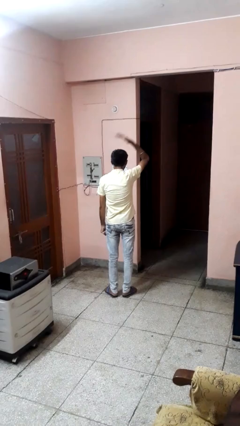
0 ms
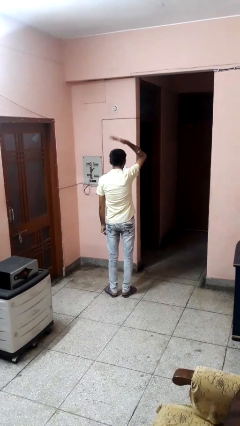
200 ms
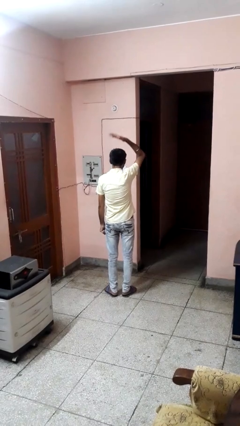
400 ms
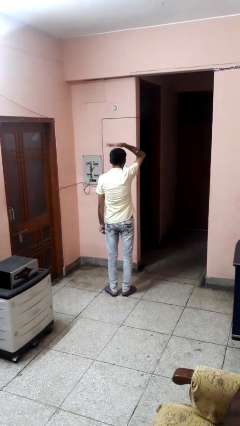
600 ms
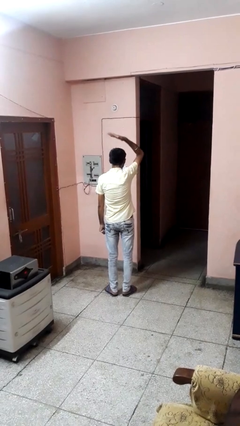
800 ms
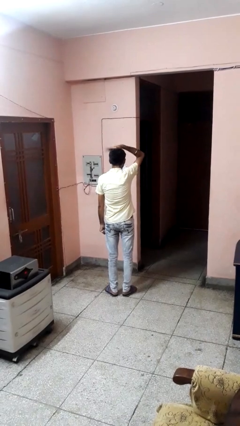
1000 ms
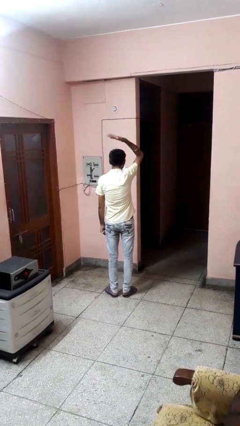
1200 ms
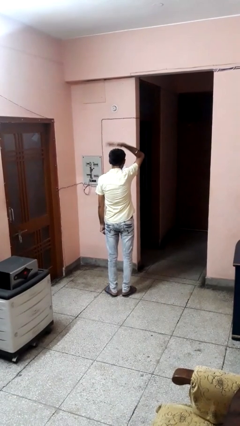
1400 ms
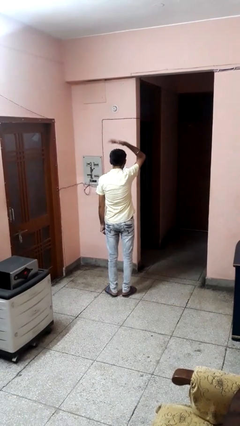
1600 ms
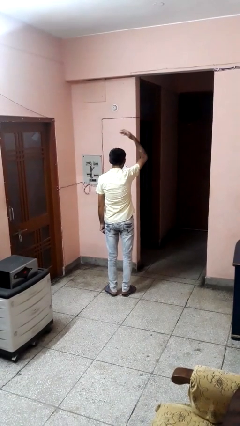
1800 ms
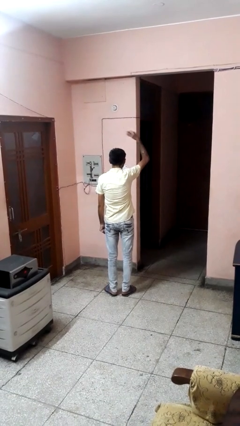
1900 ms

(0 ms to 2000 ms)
person pats head

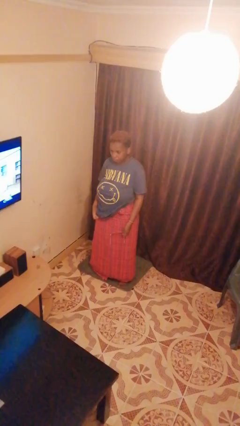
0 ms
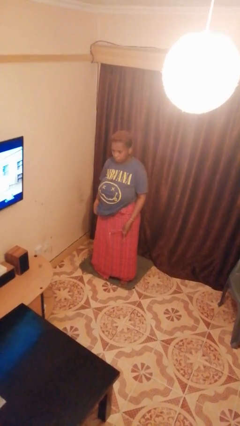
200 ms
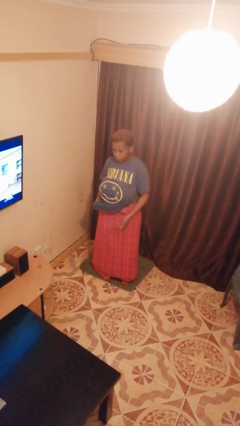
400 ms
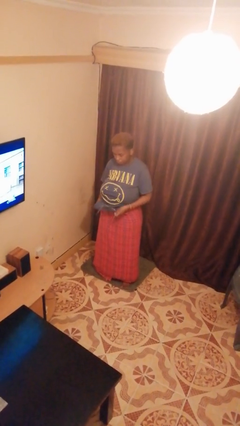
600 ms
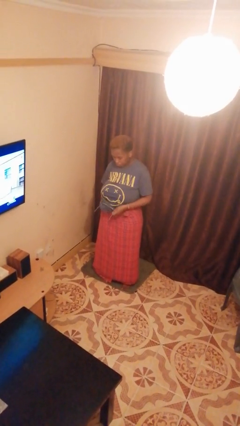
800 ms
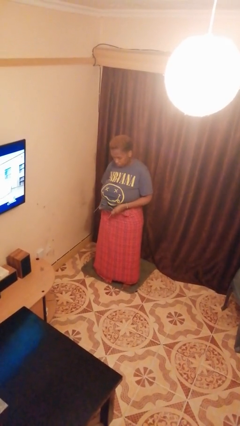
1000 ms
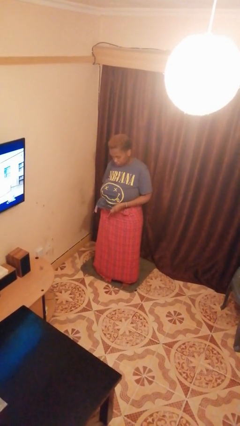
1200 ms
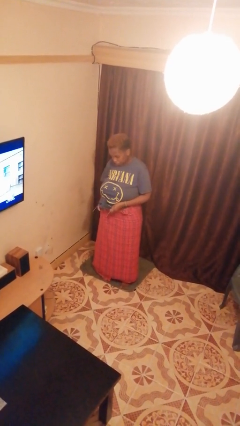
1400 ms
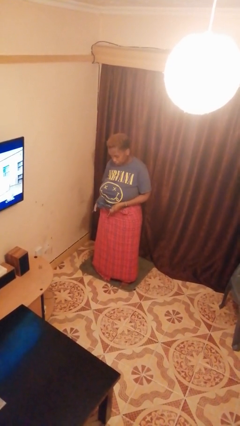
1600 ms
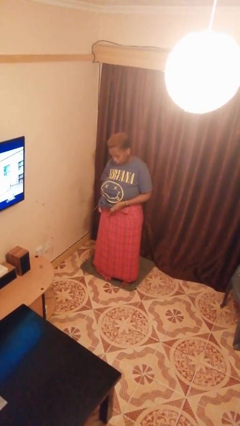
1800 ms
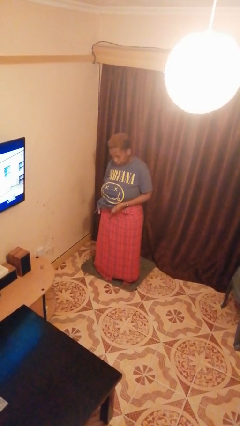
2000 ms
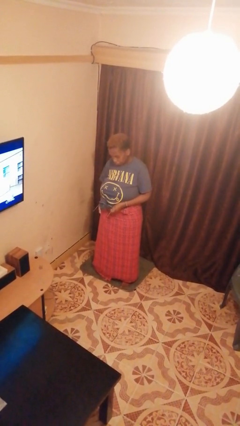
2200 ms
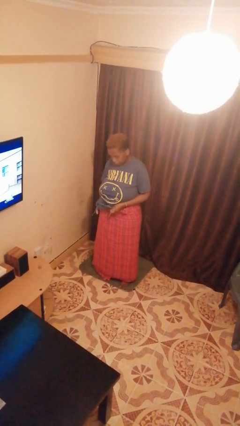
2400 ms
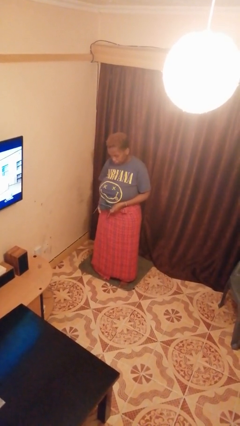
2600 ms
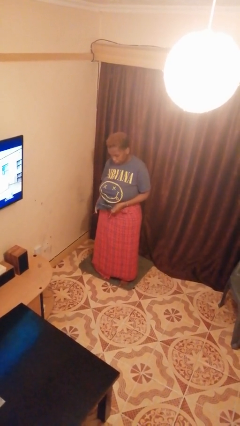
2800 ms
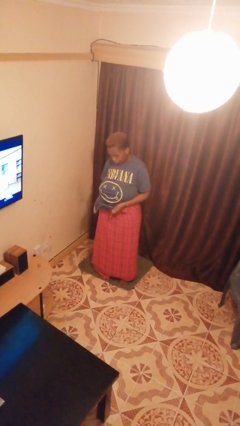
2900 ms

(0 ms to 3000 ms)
person cleans eyeglasses

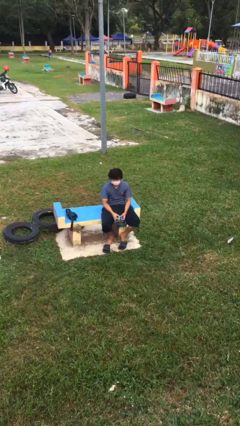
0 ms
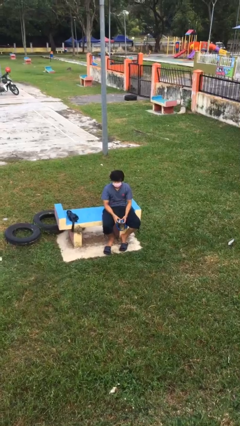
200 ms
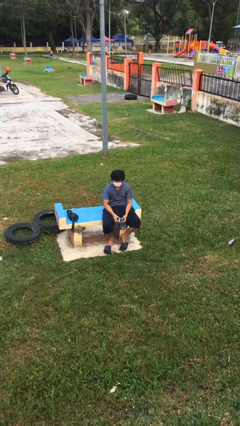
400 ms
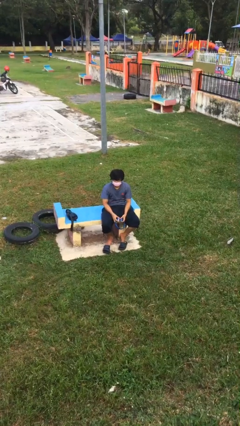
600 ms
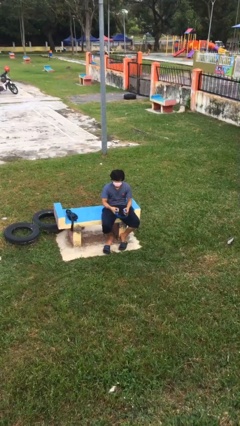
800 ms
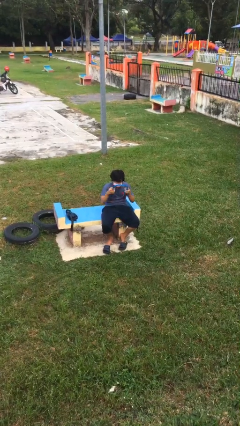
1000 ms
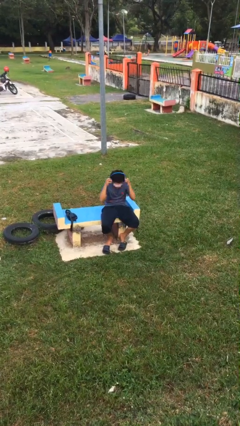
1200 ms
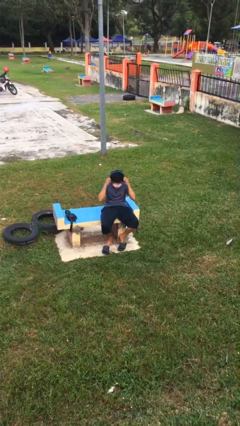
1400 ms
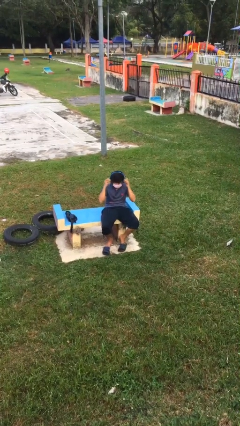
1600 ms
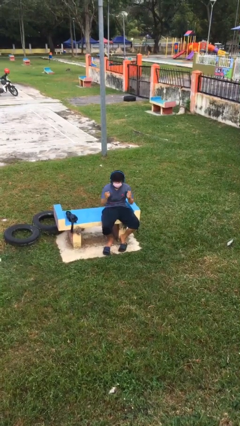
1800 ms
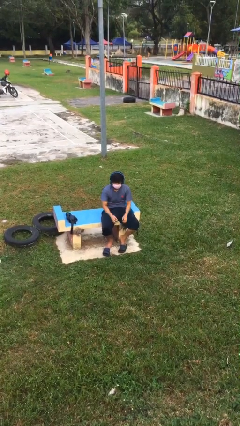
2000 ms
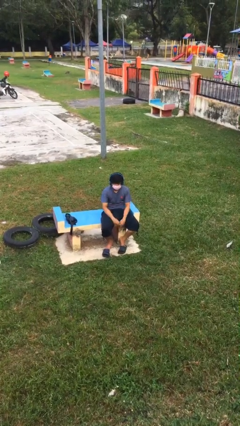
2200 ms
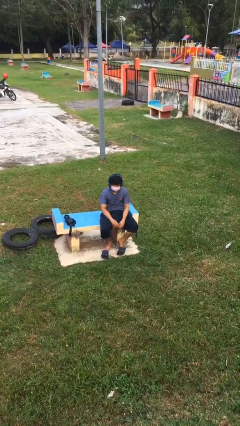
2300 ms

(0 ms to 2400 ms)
person puts on headphones

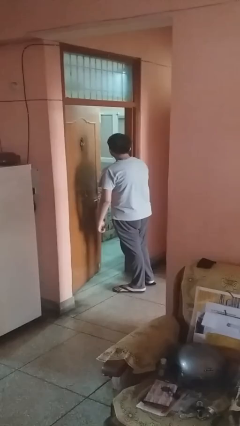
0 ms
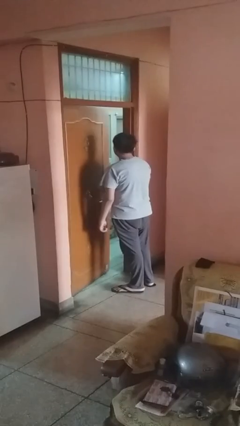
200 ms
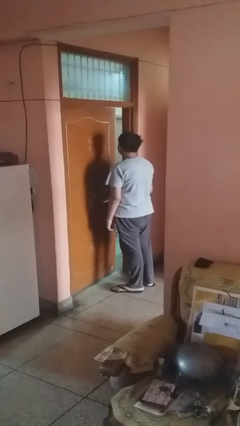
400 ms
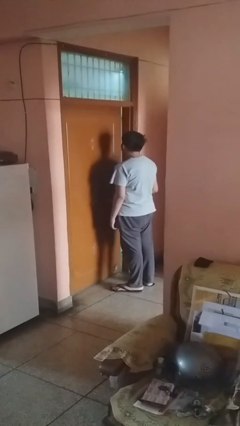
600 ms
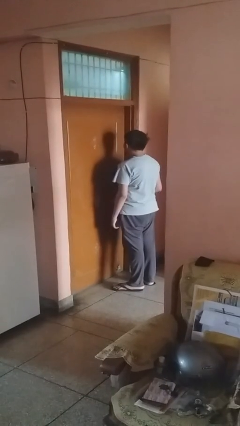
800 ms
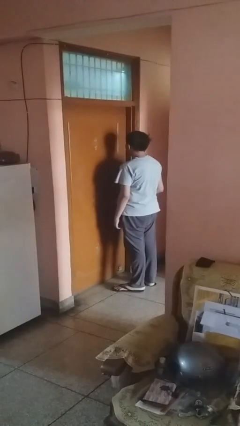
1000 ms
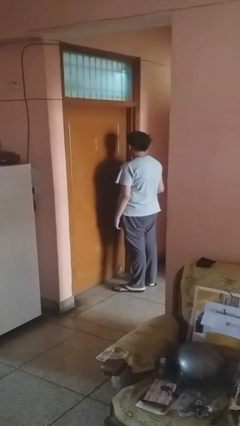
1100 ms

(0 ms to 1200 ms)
person closes facility door

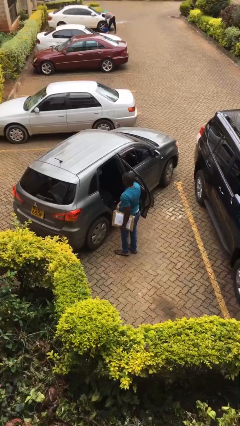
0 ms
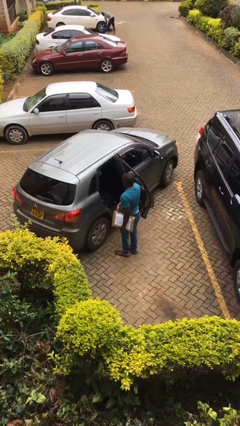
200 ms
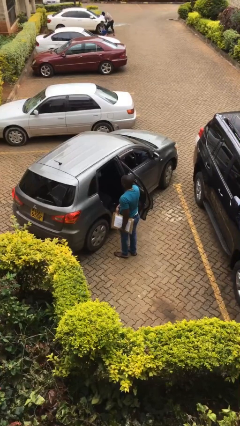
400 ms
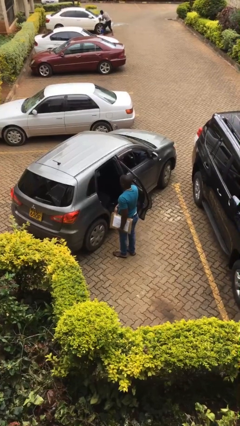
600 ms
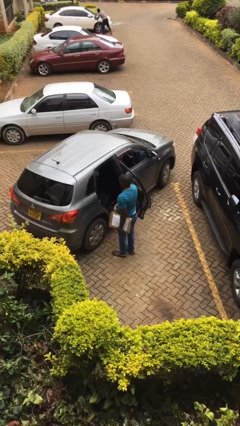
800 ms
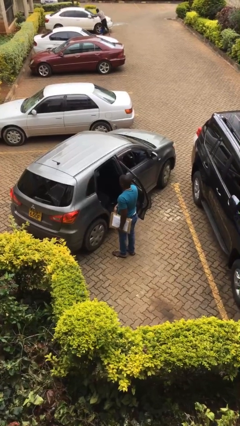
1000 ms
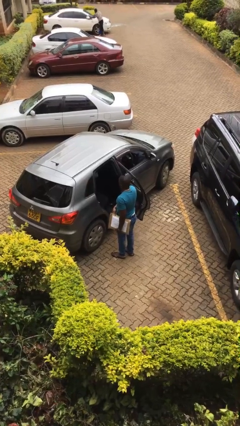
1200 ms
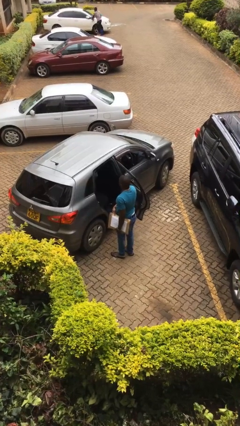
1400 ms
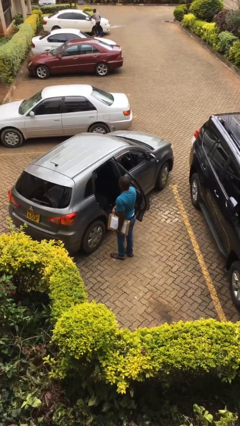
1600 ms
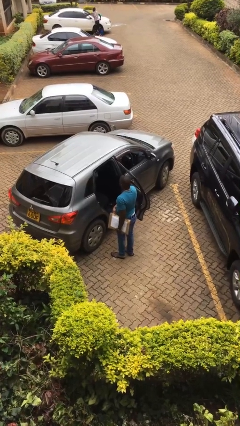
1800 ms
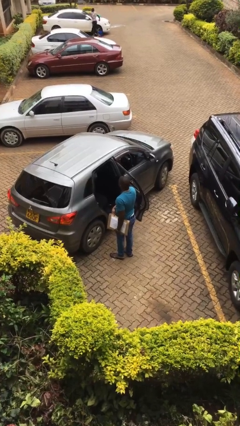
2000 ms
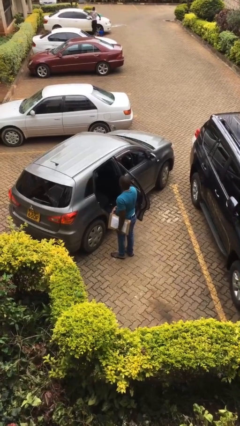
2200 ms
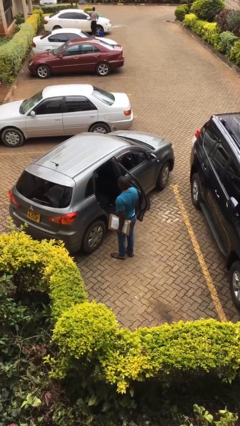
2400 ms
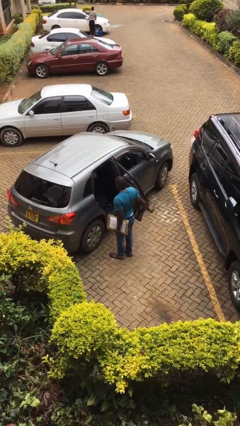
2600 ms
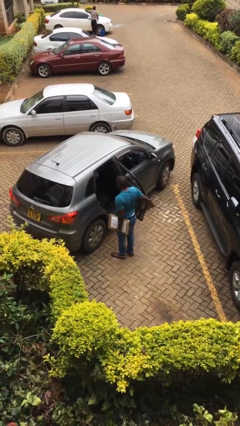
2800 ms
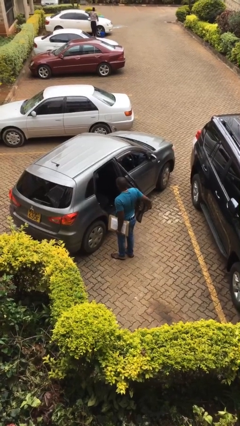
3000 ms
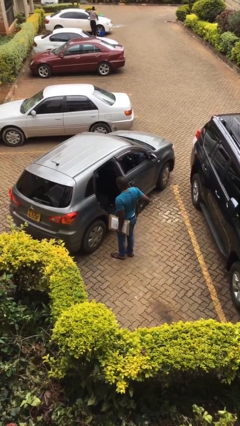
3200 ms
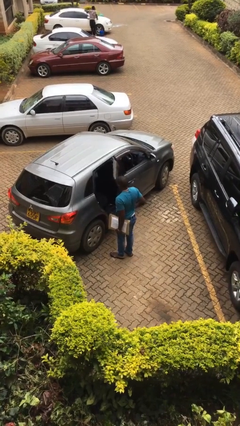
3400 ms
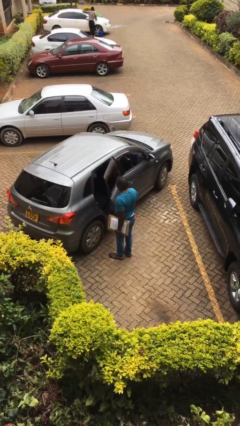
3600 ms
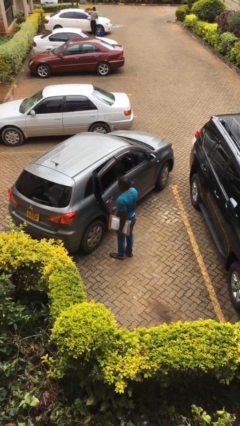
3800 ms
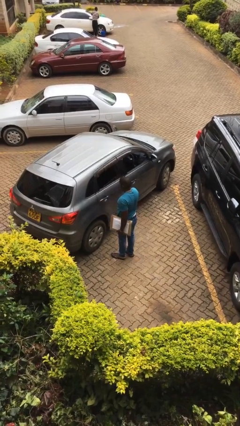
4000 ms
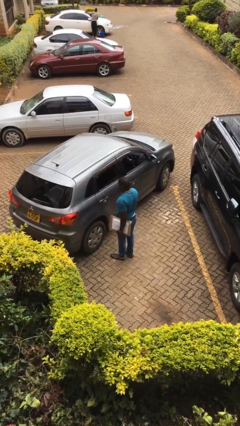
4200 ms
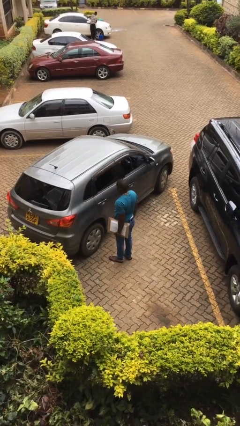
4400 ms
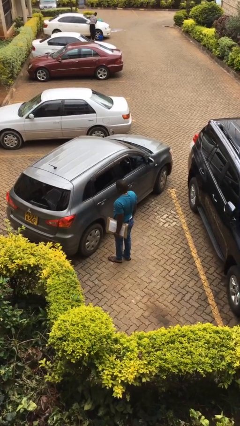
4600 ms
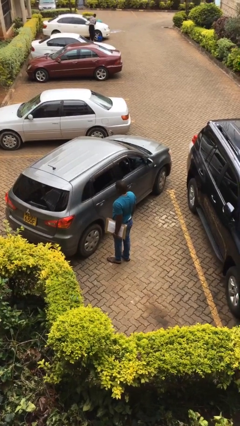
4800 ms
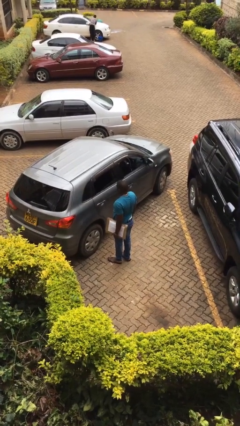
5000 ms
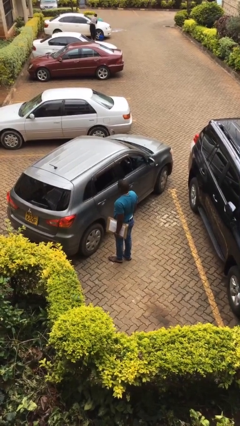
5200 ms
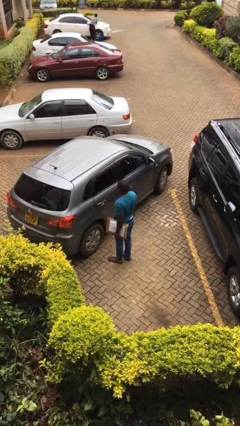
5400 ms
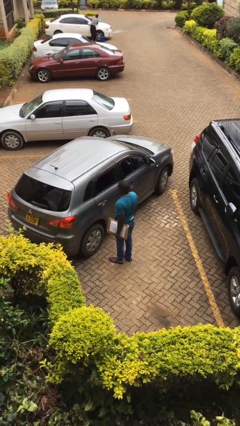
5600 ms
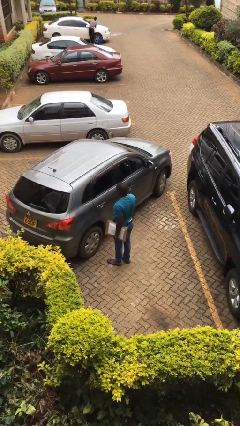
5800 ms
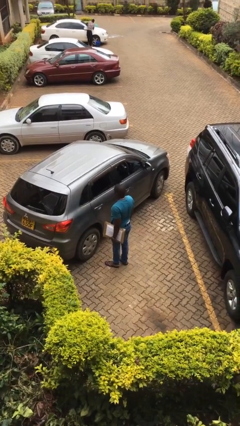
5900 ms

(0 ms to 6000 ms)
person closes car door

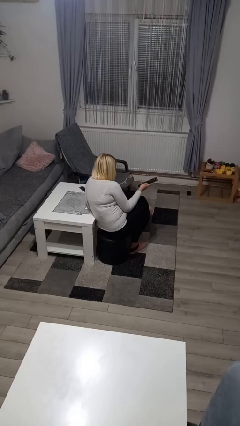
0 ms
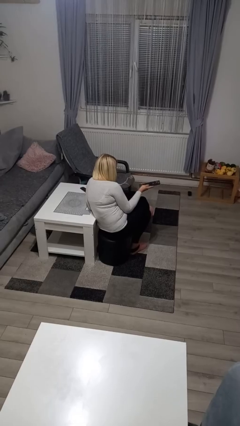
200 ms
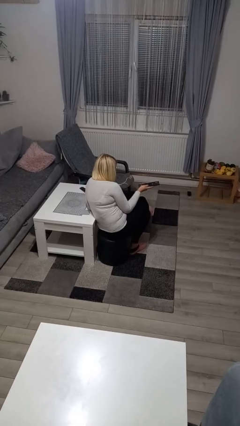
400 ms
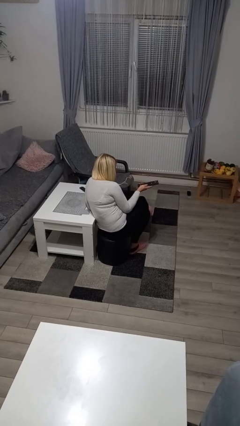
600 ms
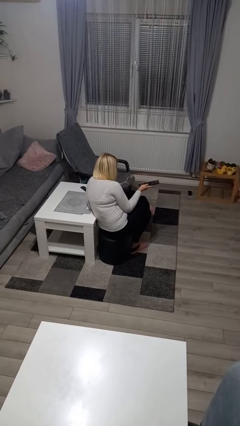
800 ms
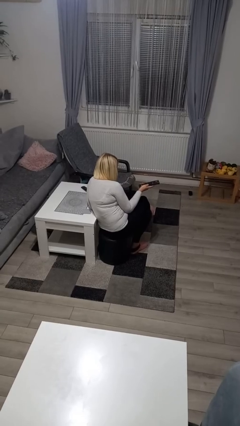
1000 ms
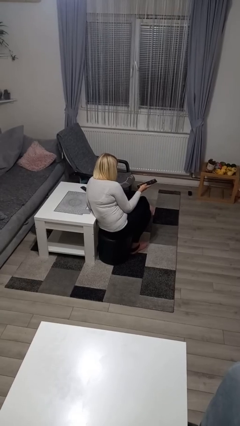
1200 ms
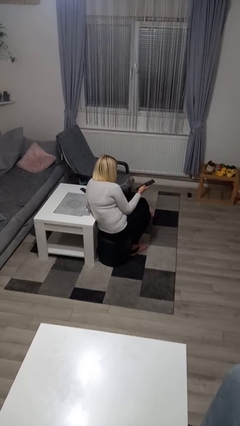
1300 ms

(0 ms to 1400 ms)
person uses television remote

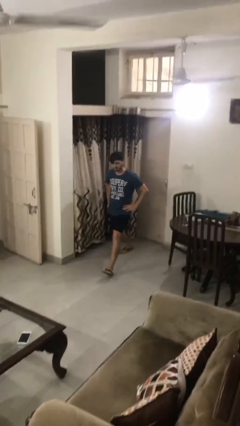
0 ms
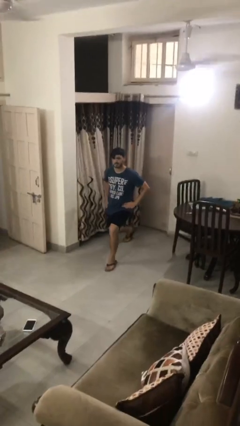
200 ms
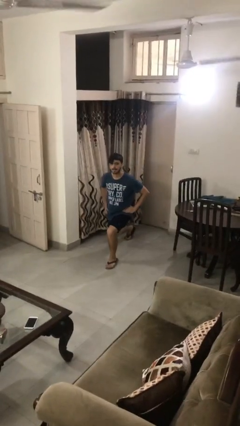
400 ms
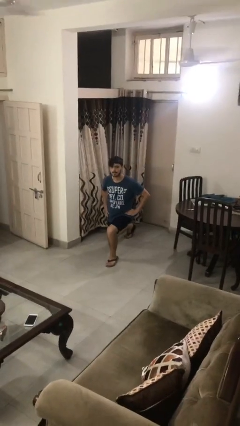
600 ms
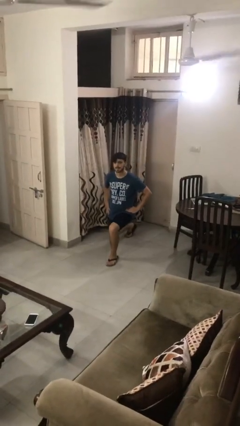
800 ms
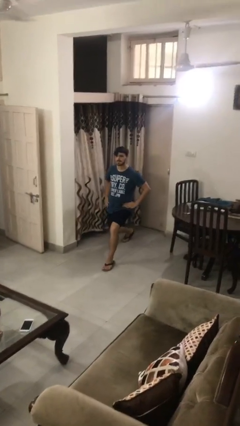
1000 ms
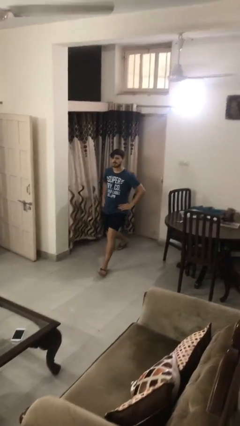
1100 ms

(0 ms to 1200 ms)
person exercises with lunges

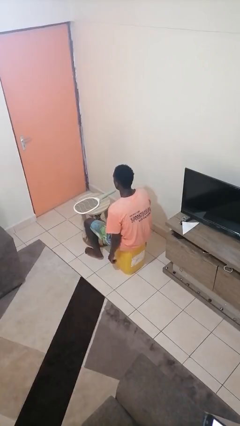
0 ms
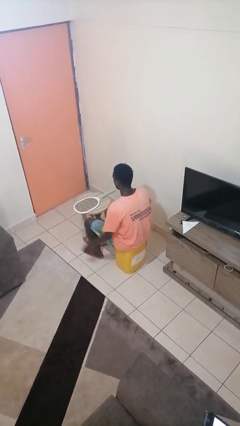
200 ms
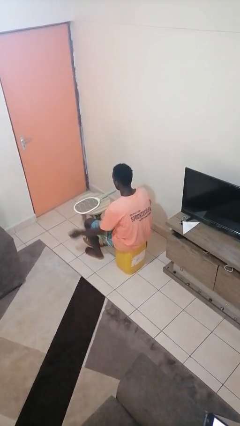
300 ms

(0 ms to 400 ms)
person waves hand over object
